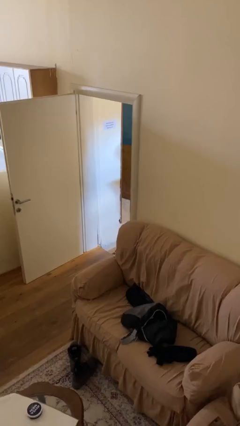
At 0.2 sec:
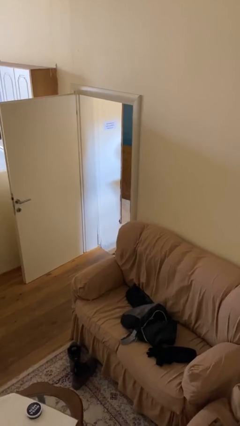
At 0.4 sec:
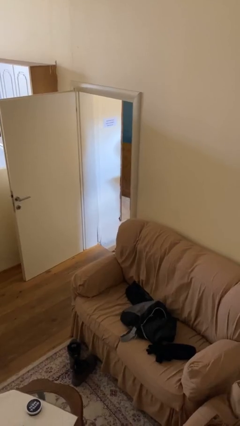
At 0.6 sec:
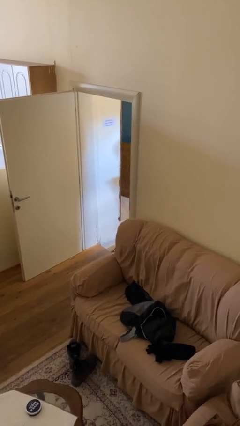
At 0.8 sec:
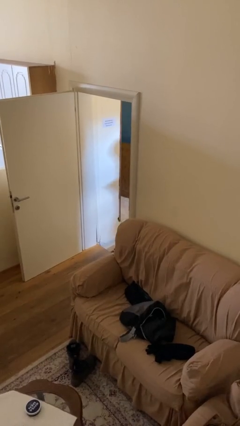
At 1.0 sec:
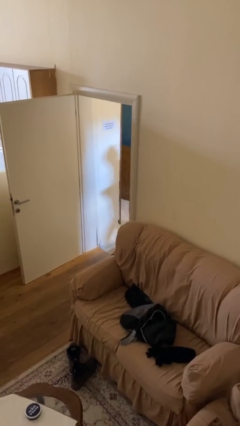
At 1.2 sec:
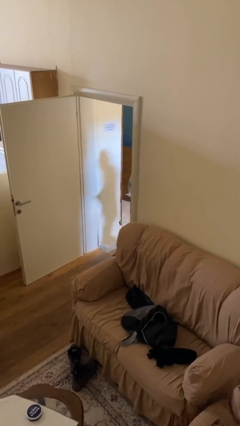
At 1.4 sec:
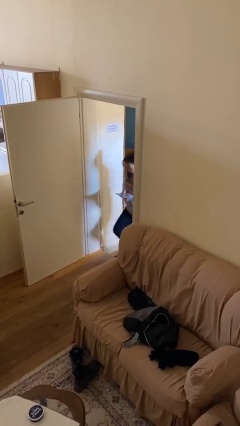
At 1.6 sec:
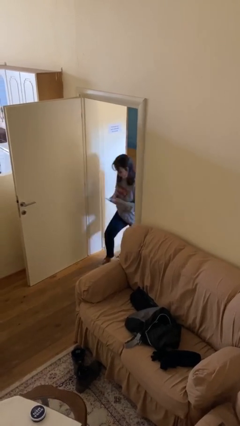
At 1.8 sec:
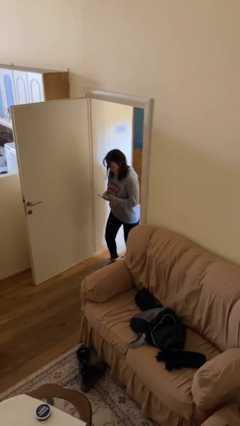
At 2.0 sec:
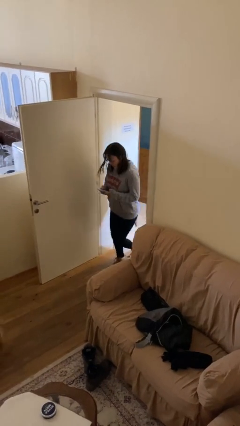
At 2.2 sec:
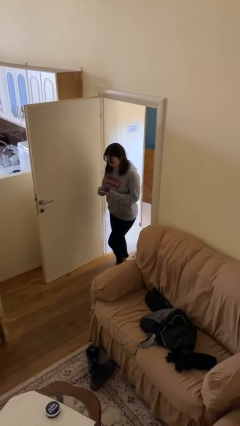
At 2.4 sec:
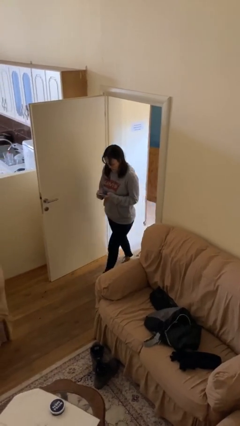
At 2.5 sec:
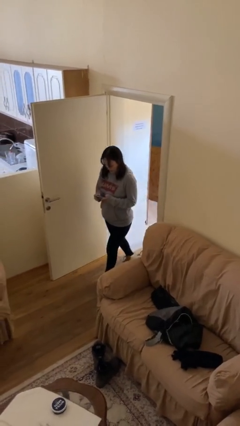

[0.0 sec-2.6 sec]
person enters scene through structure

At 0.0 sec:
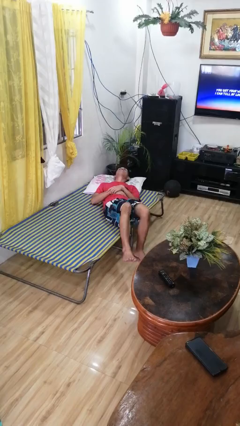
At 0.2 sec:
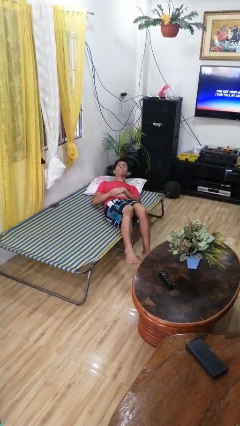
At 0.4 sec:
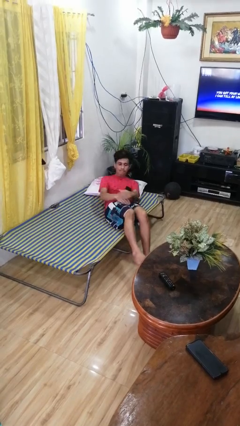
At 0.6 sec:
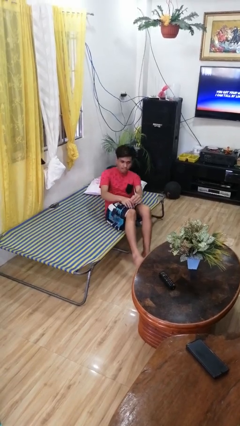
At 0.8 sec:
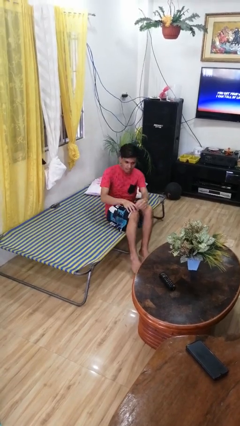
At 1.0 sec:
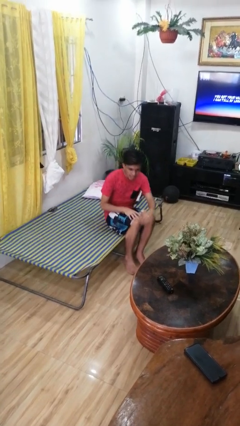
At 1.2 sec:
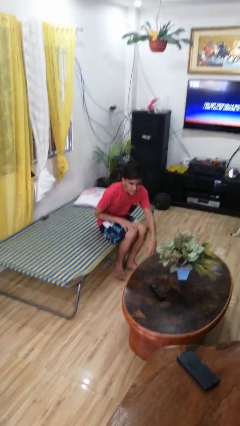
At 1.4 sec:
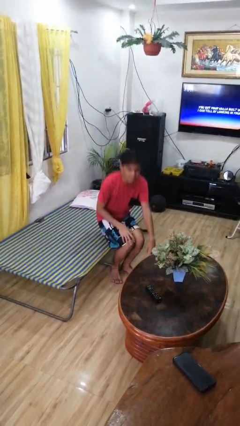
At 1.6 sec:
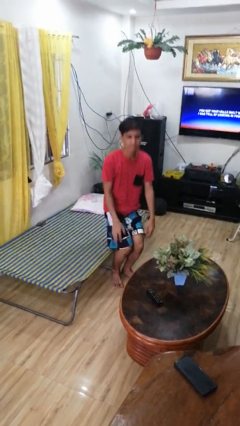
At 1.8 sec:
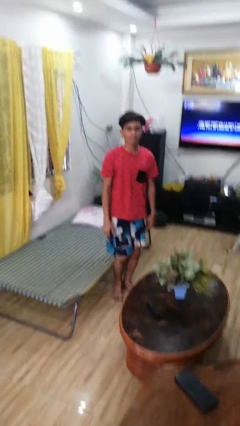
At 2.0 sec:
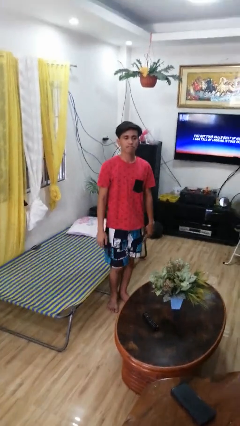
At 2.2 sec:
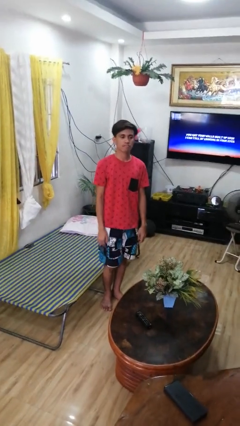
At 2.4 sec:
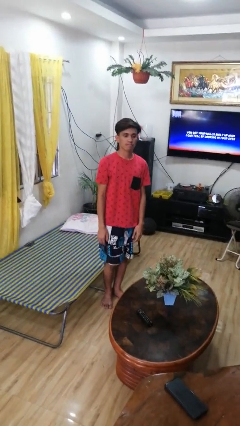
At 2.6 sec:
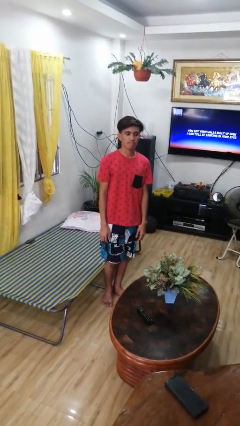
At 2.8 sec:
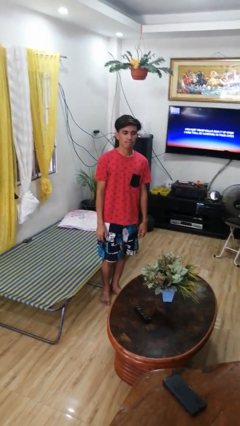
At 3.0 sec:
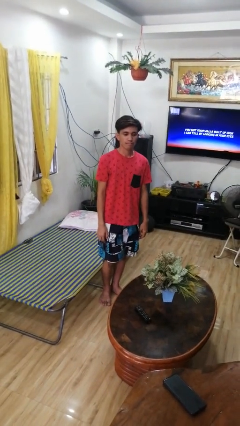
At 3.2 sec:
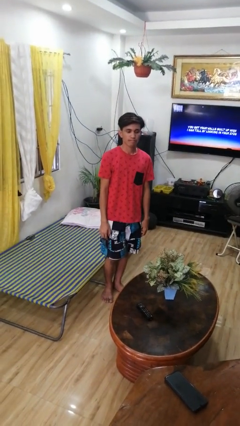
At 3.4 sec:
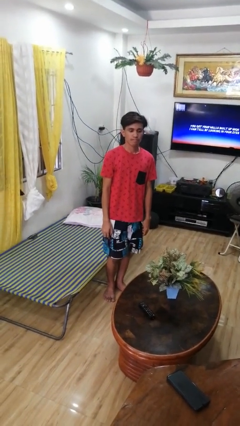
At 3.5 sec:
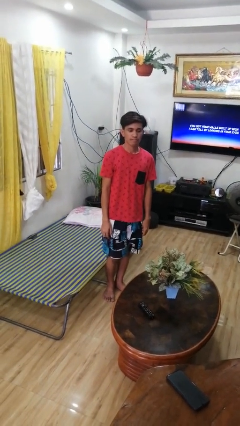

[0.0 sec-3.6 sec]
person stands up

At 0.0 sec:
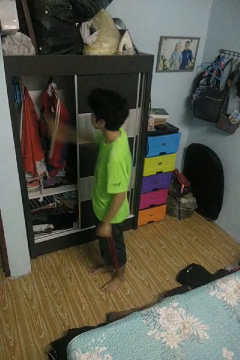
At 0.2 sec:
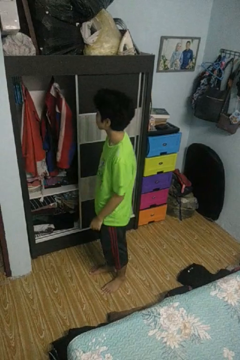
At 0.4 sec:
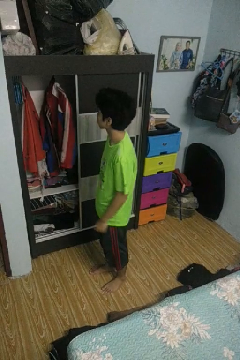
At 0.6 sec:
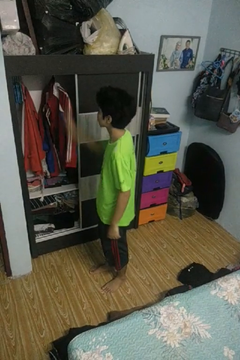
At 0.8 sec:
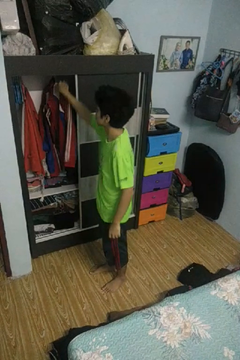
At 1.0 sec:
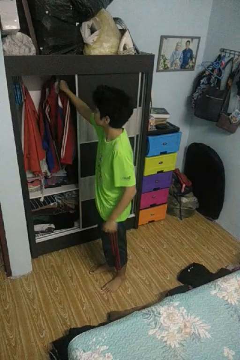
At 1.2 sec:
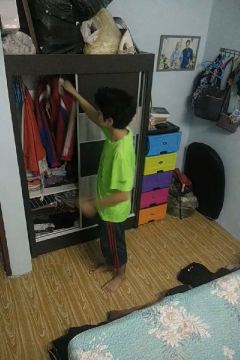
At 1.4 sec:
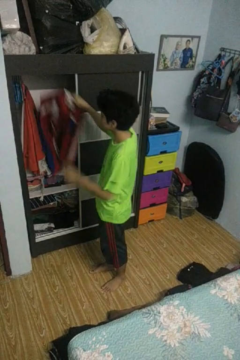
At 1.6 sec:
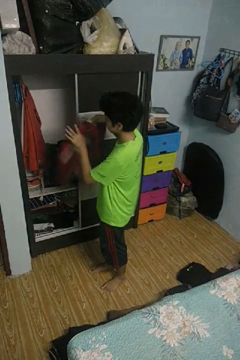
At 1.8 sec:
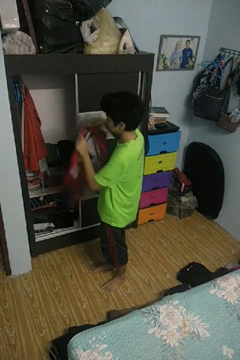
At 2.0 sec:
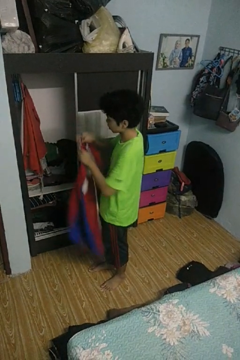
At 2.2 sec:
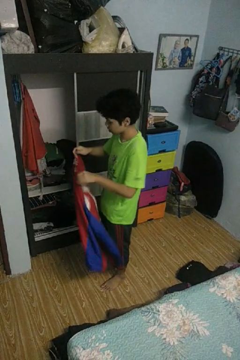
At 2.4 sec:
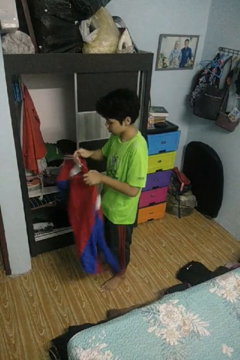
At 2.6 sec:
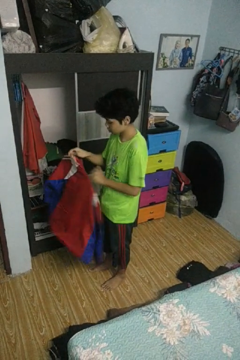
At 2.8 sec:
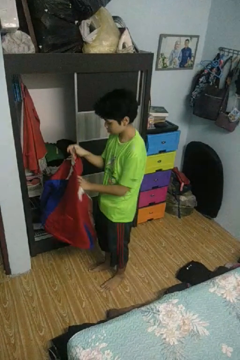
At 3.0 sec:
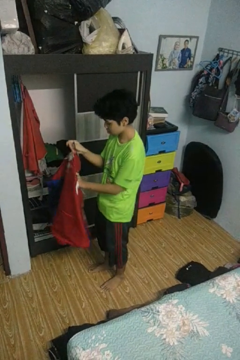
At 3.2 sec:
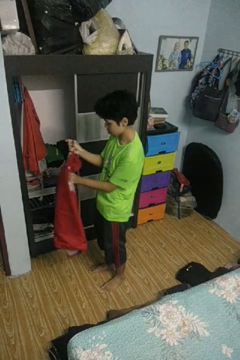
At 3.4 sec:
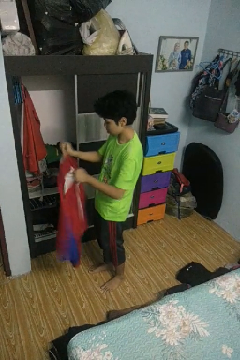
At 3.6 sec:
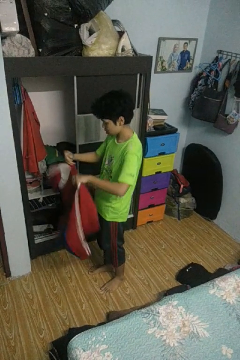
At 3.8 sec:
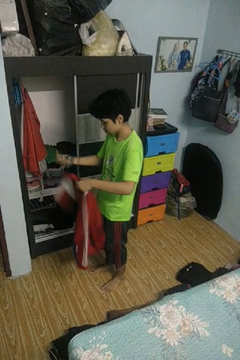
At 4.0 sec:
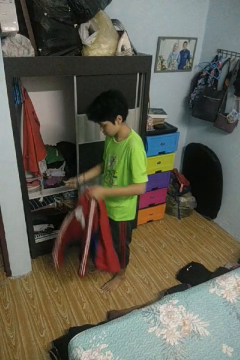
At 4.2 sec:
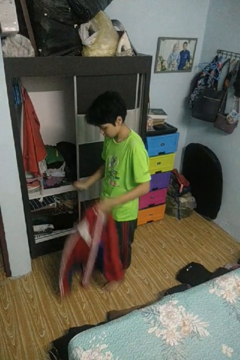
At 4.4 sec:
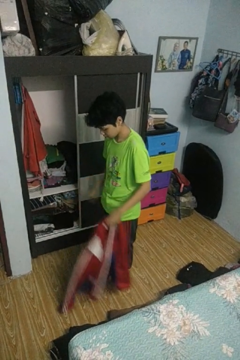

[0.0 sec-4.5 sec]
person takes clothes from closet

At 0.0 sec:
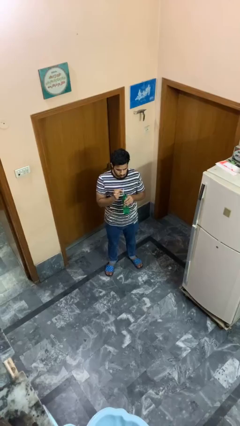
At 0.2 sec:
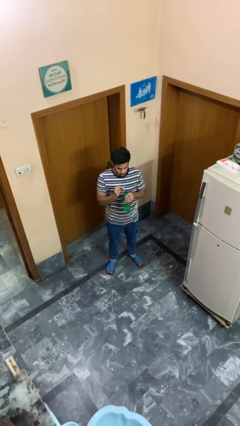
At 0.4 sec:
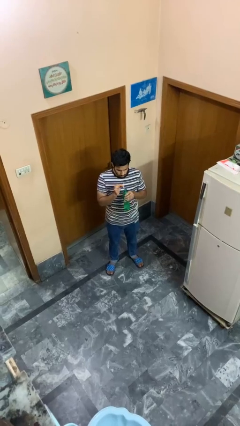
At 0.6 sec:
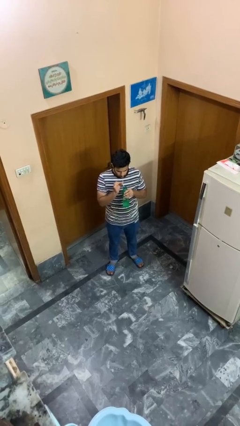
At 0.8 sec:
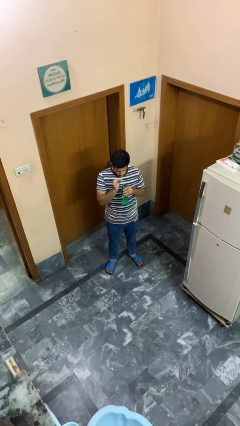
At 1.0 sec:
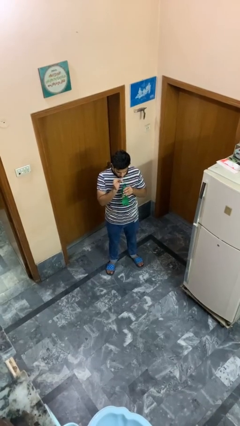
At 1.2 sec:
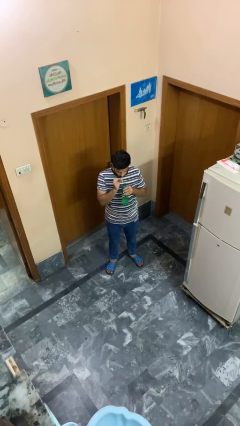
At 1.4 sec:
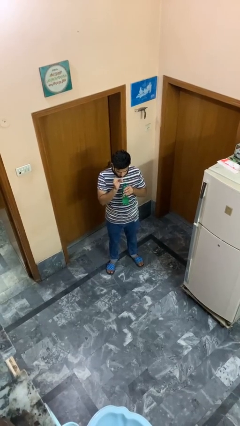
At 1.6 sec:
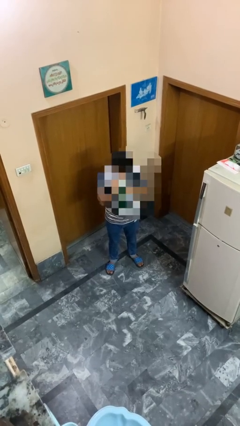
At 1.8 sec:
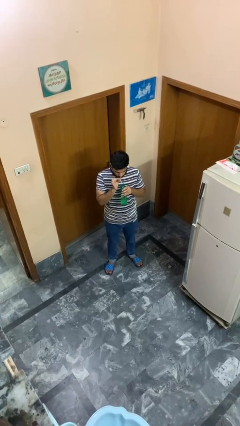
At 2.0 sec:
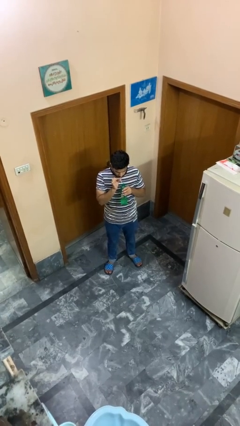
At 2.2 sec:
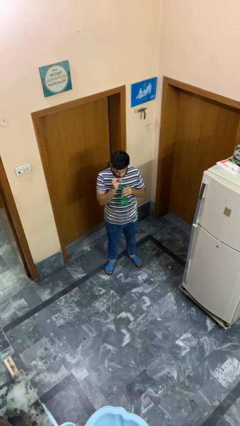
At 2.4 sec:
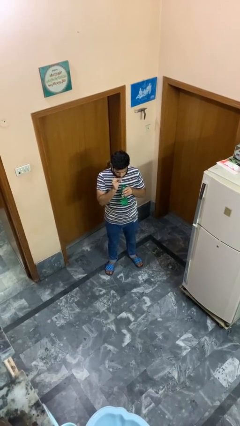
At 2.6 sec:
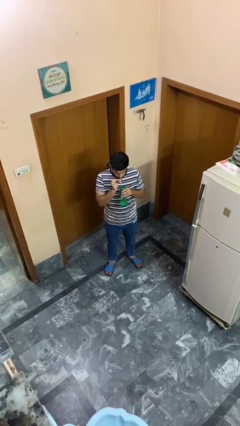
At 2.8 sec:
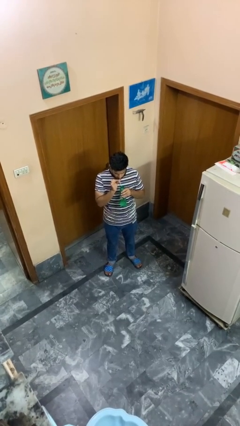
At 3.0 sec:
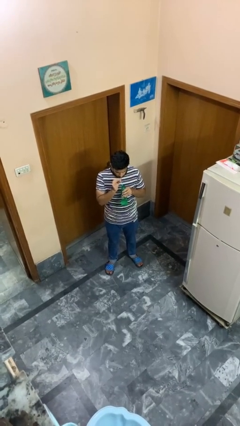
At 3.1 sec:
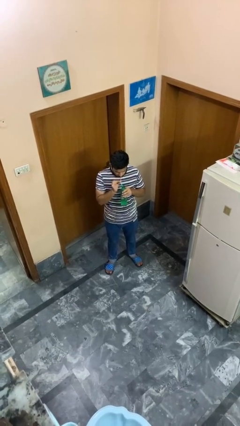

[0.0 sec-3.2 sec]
person drinks from straw

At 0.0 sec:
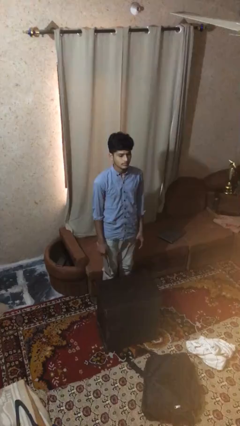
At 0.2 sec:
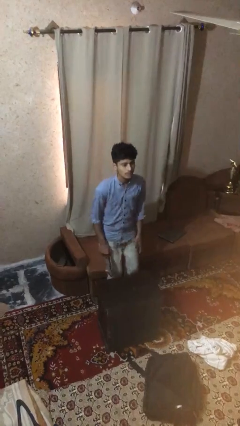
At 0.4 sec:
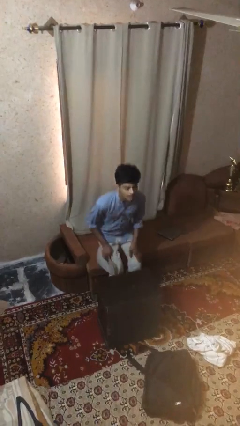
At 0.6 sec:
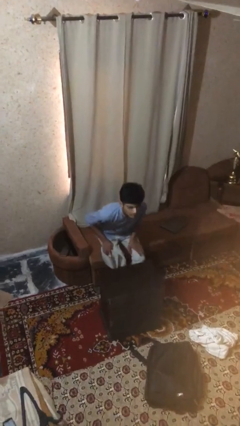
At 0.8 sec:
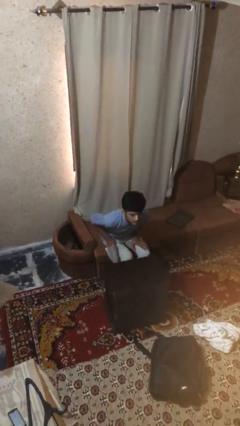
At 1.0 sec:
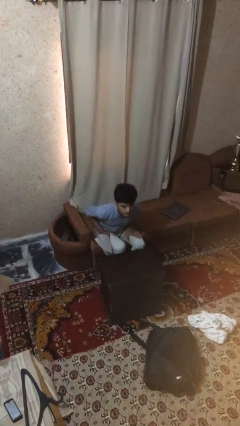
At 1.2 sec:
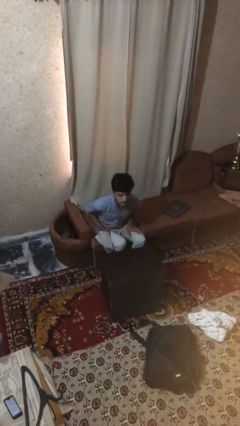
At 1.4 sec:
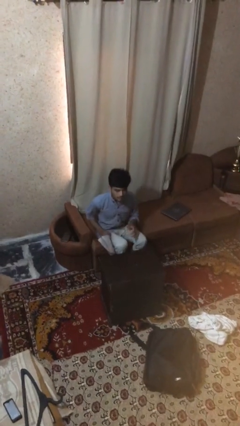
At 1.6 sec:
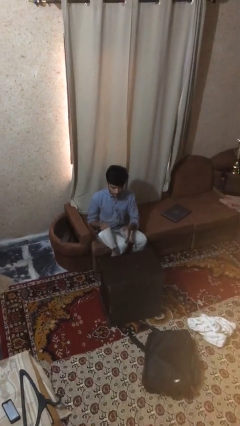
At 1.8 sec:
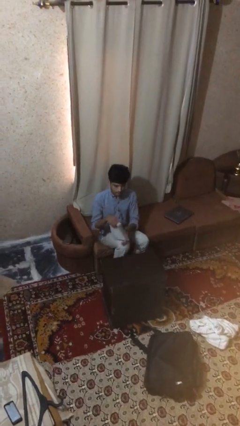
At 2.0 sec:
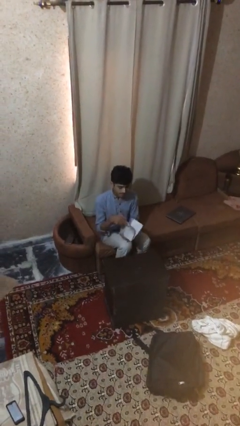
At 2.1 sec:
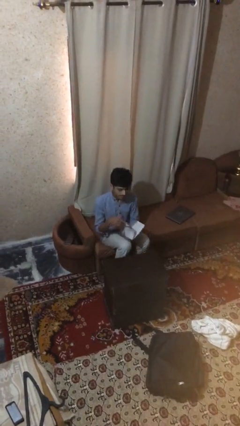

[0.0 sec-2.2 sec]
person sits down

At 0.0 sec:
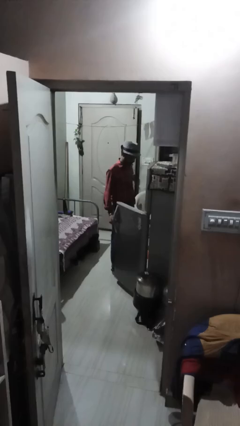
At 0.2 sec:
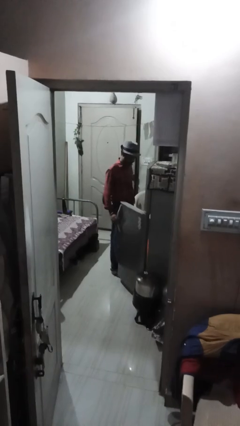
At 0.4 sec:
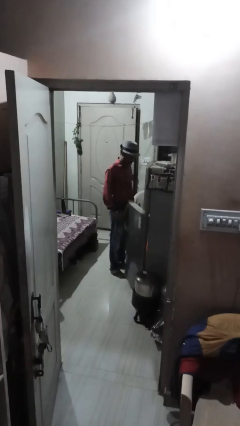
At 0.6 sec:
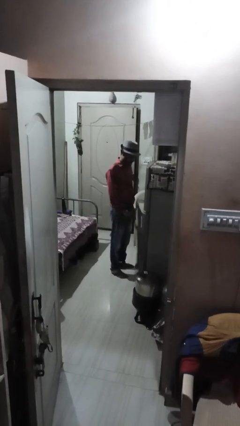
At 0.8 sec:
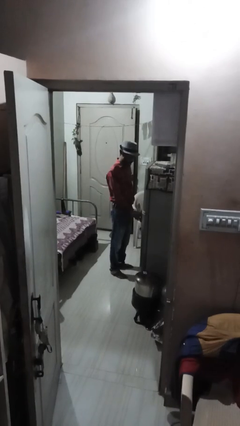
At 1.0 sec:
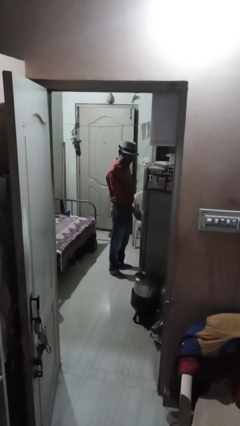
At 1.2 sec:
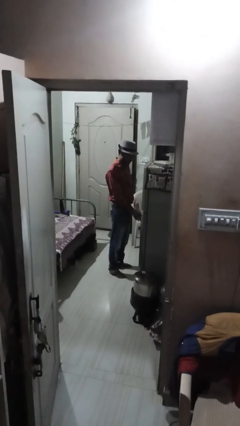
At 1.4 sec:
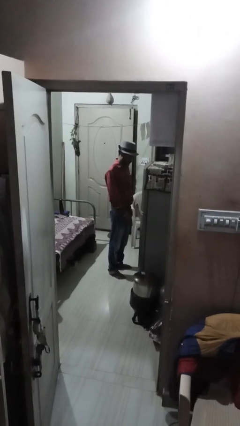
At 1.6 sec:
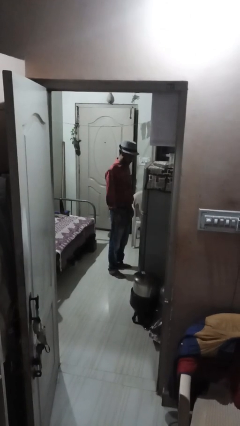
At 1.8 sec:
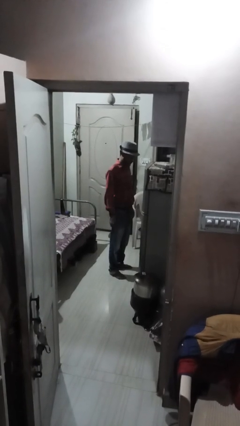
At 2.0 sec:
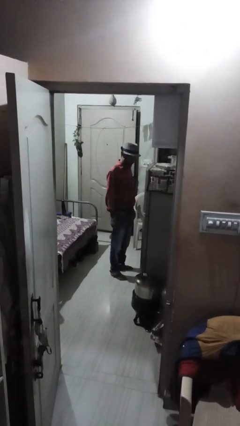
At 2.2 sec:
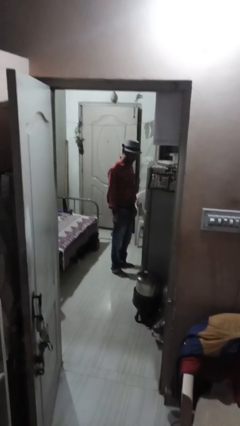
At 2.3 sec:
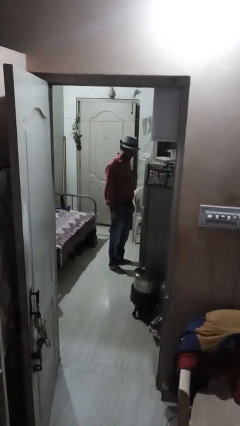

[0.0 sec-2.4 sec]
person closes refrigerator
